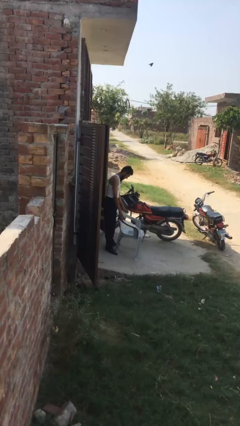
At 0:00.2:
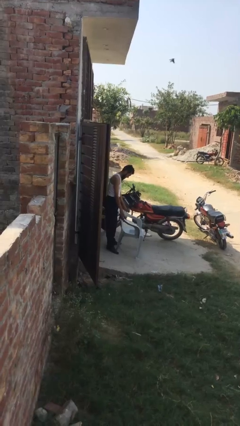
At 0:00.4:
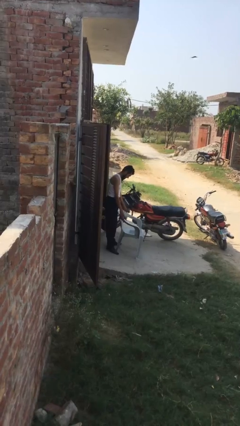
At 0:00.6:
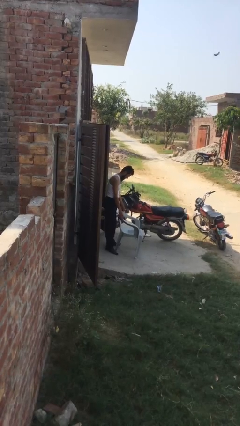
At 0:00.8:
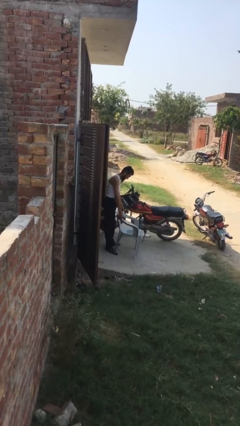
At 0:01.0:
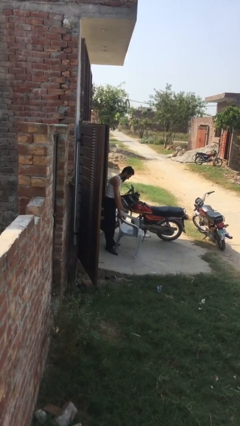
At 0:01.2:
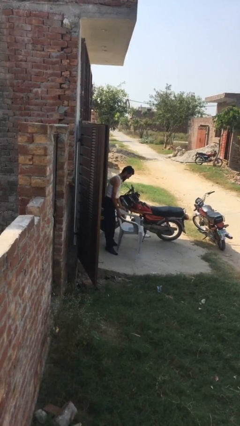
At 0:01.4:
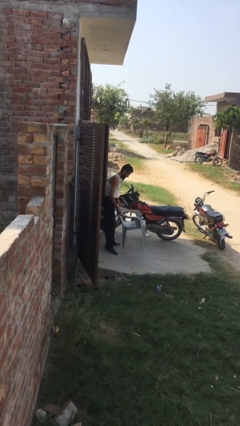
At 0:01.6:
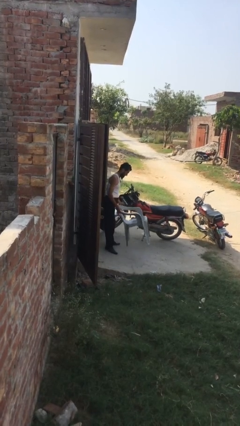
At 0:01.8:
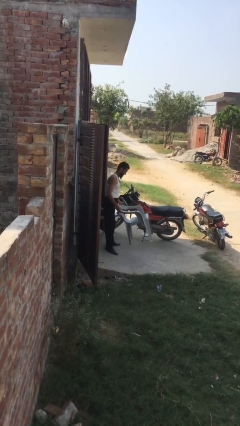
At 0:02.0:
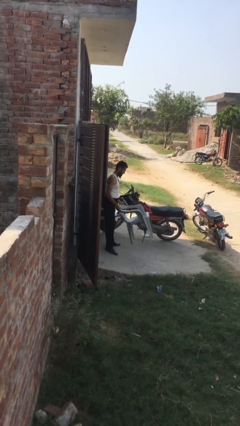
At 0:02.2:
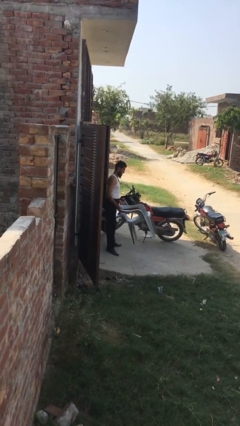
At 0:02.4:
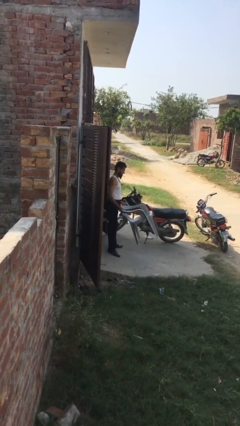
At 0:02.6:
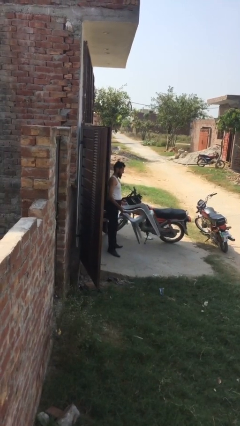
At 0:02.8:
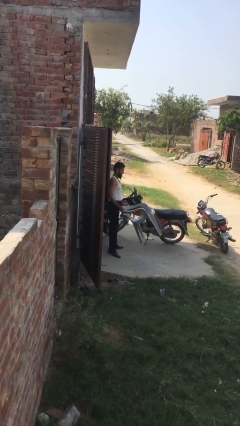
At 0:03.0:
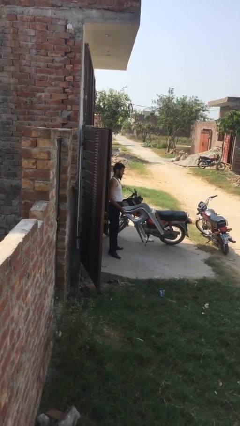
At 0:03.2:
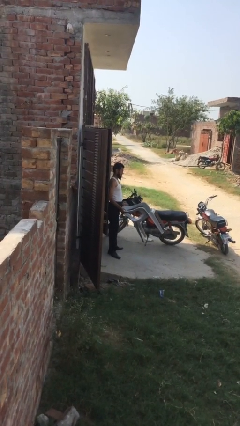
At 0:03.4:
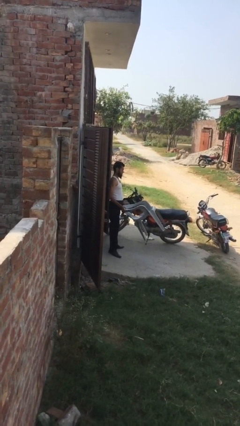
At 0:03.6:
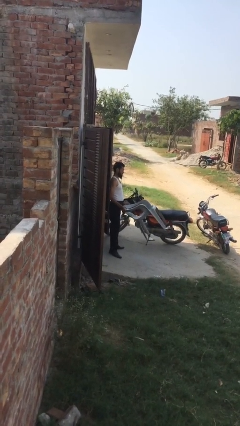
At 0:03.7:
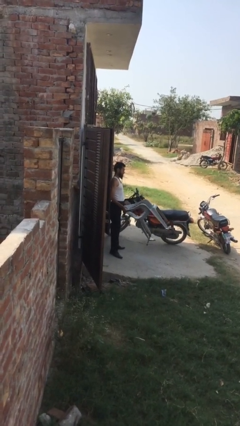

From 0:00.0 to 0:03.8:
person picks up object from floor

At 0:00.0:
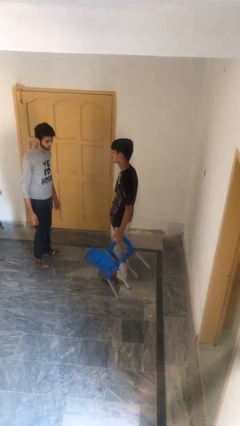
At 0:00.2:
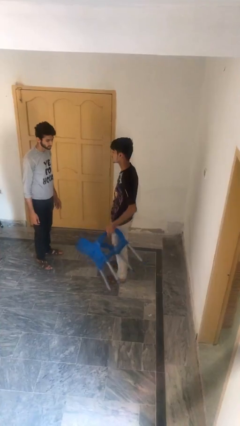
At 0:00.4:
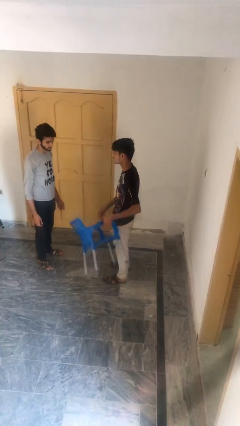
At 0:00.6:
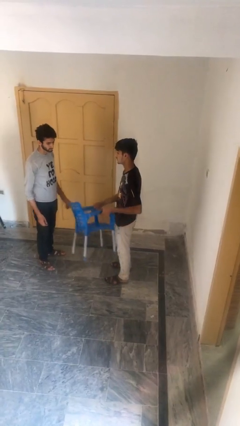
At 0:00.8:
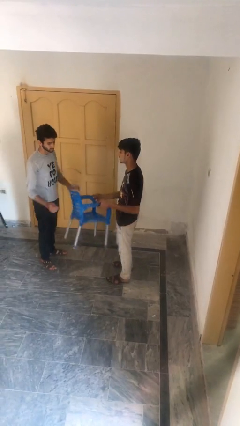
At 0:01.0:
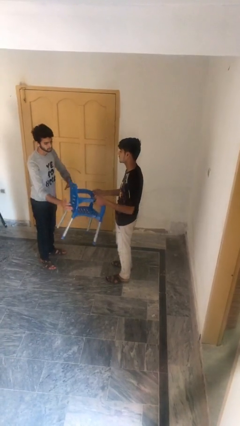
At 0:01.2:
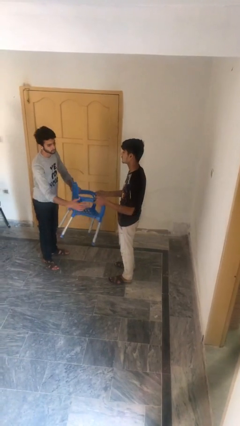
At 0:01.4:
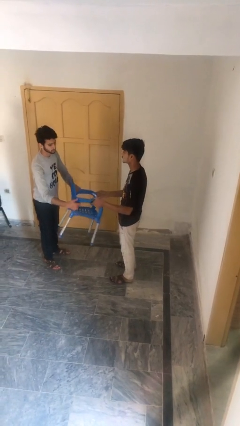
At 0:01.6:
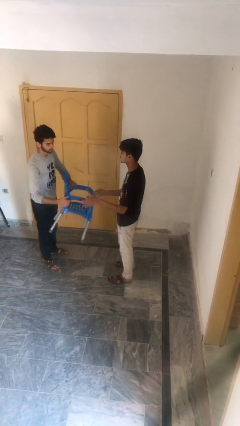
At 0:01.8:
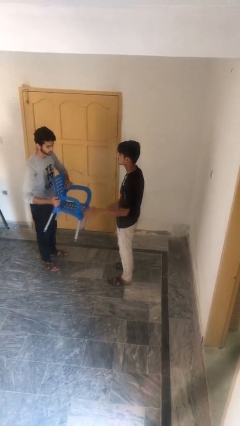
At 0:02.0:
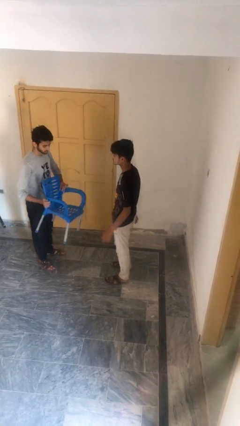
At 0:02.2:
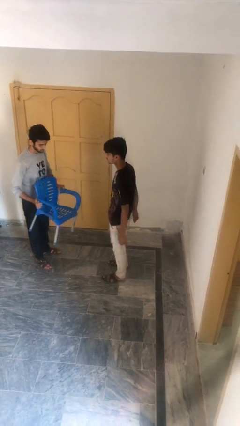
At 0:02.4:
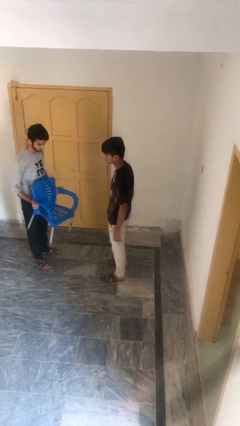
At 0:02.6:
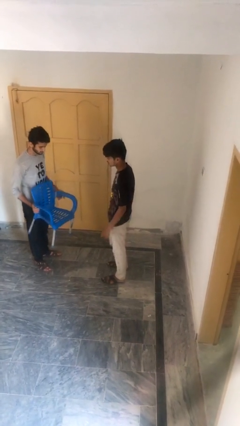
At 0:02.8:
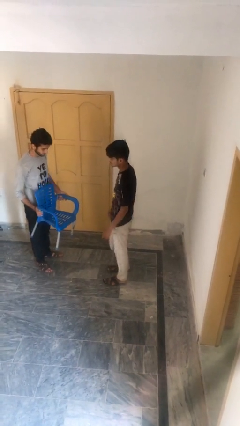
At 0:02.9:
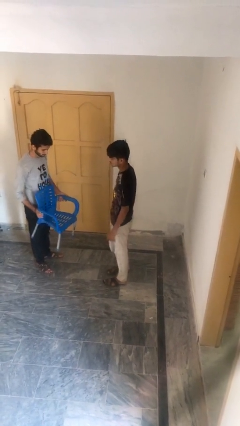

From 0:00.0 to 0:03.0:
person transfers object to person

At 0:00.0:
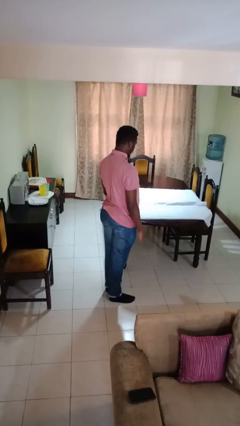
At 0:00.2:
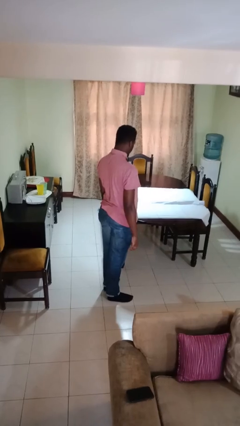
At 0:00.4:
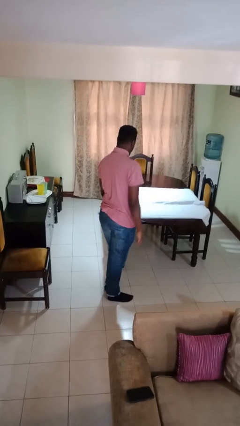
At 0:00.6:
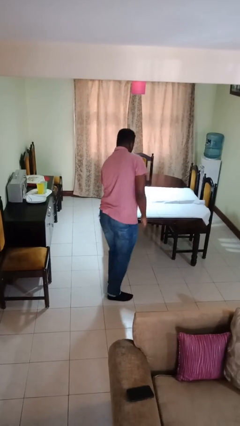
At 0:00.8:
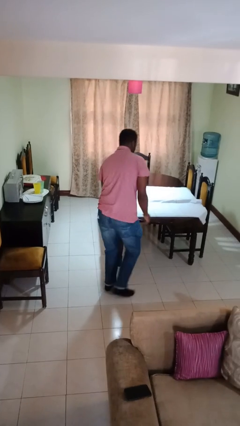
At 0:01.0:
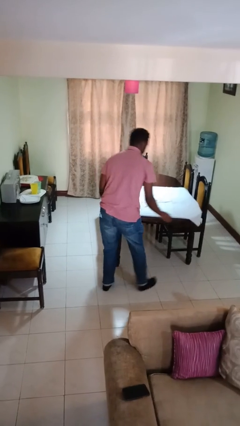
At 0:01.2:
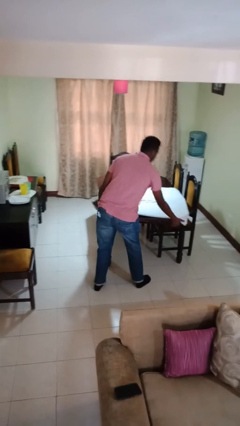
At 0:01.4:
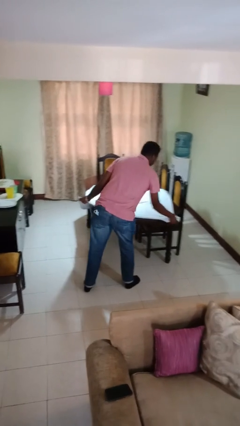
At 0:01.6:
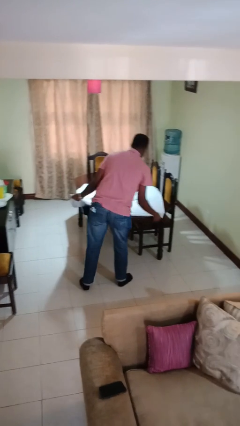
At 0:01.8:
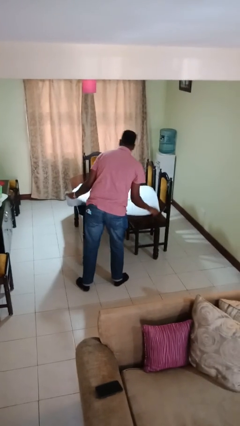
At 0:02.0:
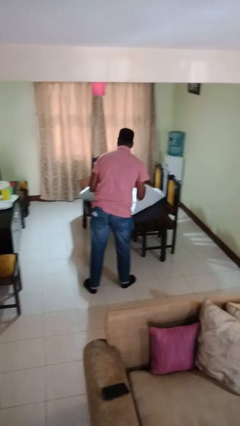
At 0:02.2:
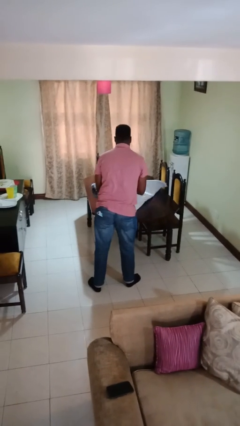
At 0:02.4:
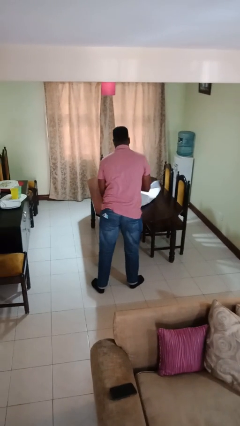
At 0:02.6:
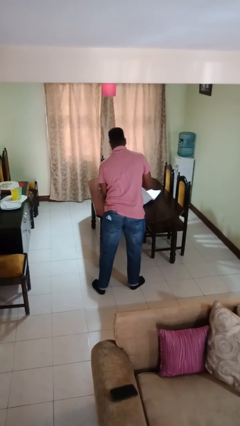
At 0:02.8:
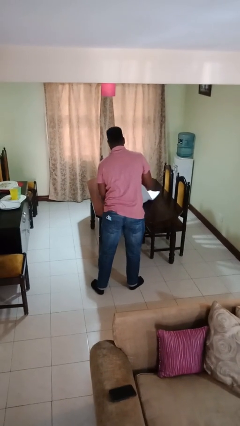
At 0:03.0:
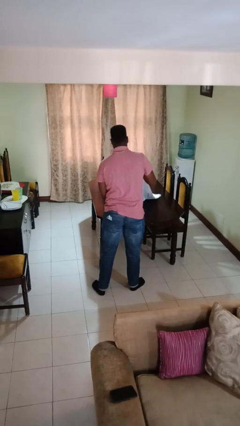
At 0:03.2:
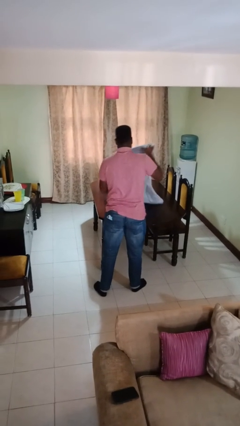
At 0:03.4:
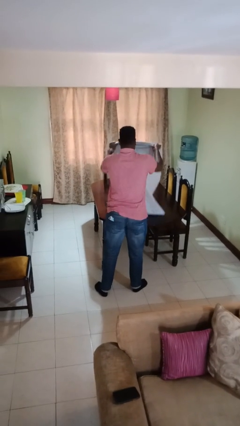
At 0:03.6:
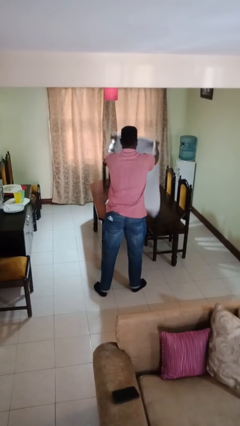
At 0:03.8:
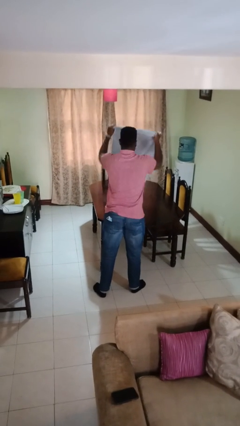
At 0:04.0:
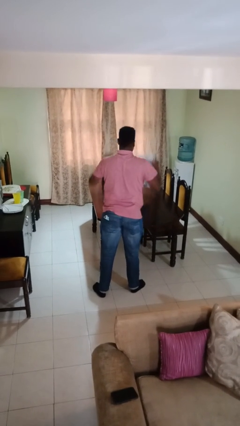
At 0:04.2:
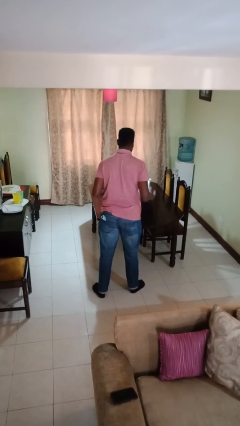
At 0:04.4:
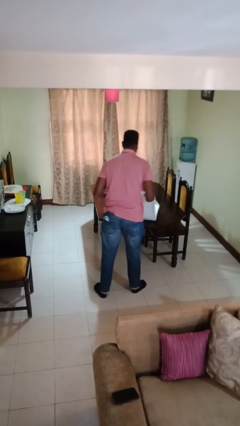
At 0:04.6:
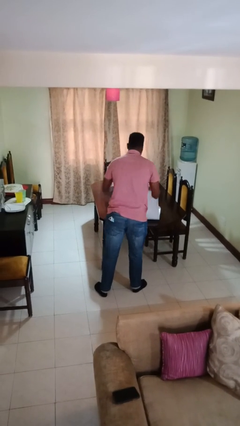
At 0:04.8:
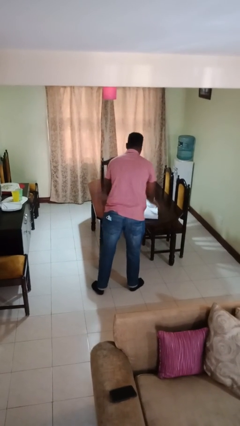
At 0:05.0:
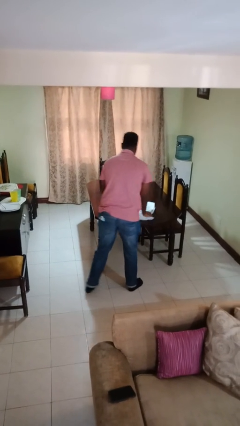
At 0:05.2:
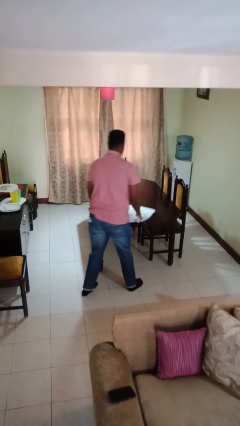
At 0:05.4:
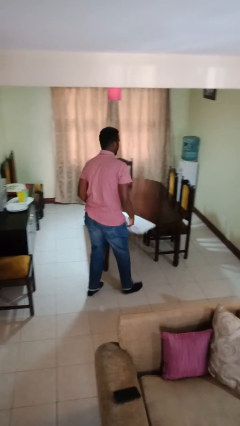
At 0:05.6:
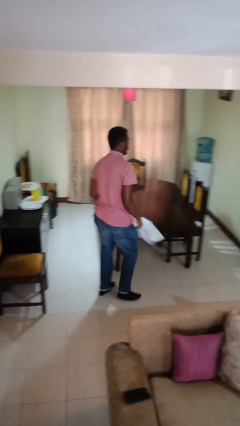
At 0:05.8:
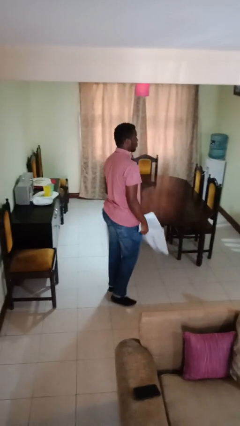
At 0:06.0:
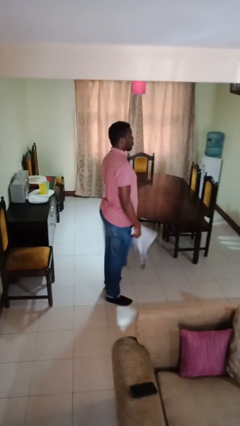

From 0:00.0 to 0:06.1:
person folds tablecloth

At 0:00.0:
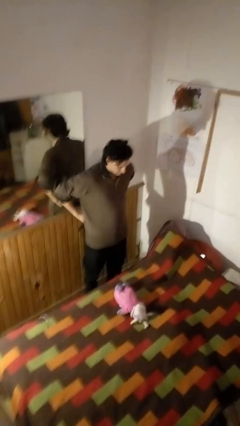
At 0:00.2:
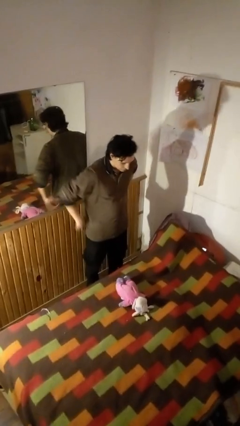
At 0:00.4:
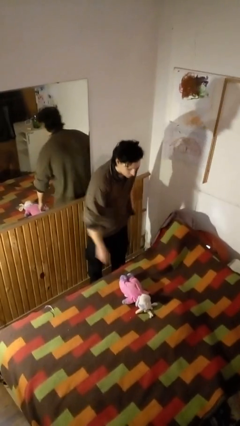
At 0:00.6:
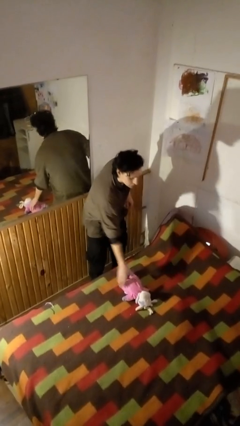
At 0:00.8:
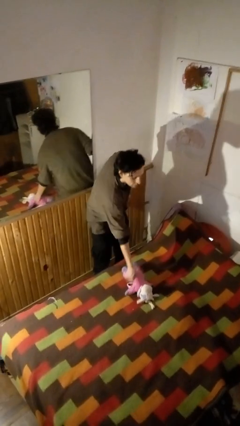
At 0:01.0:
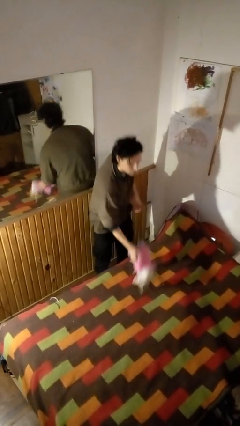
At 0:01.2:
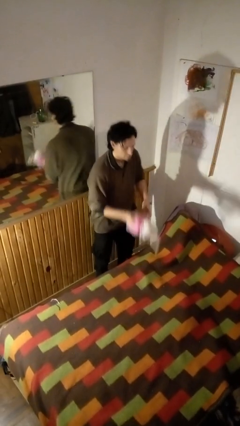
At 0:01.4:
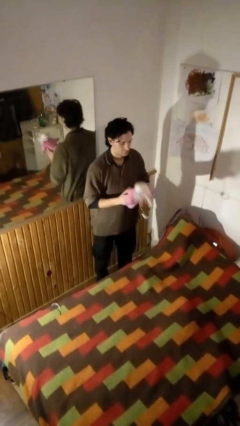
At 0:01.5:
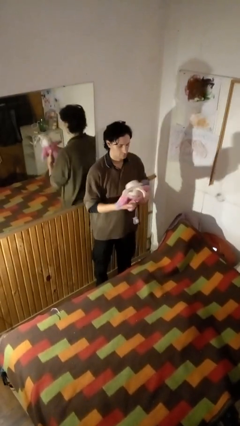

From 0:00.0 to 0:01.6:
person picks up object from bed

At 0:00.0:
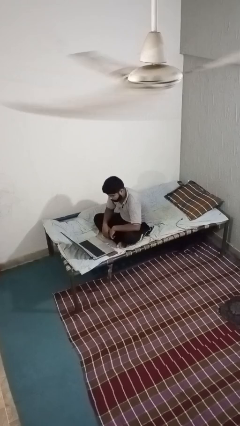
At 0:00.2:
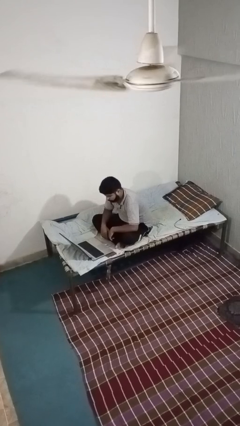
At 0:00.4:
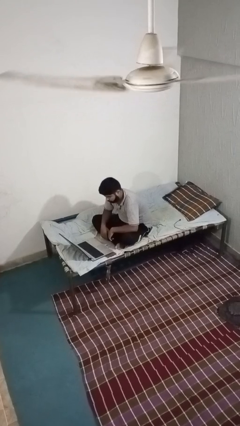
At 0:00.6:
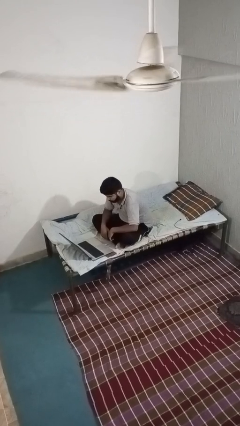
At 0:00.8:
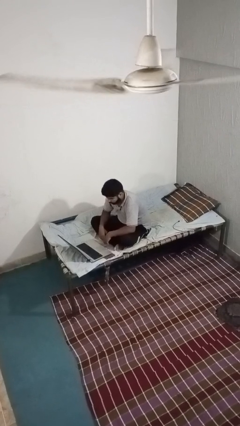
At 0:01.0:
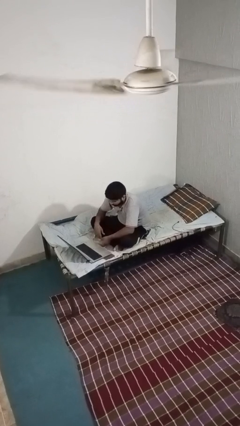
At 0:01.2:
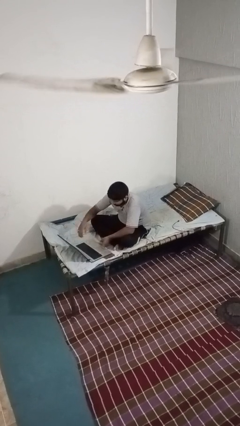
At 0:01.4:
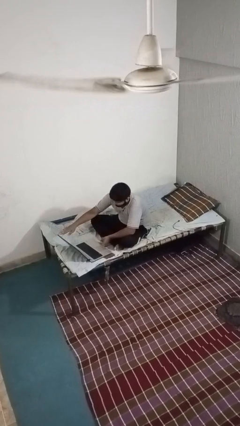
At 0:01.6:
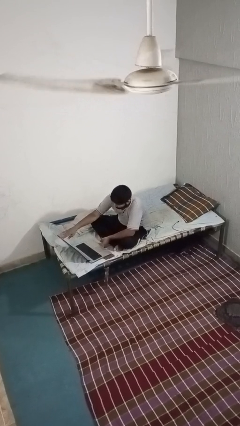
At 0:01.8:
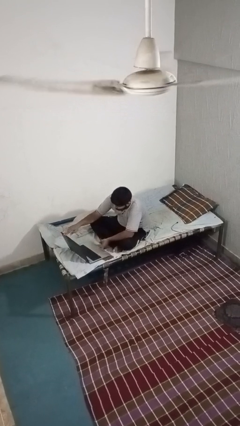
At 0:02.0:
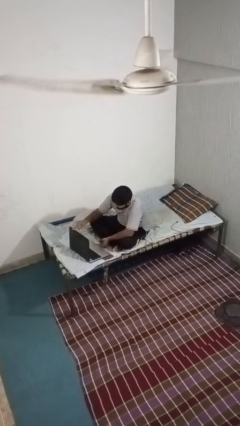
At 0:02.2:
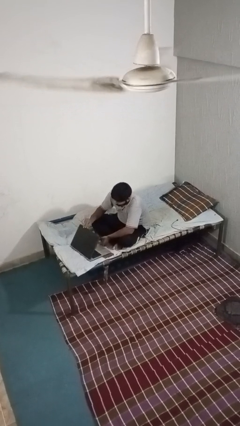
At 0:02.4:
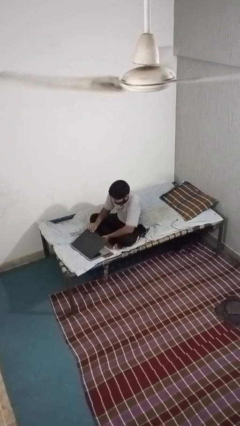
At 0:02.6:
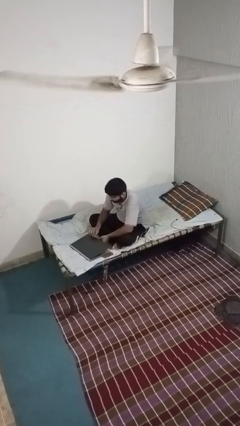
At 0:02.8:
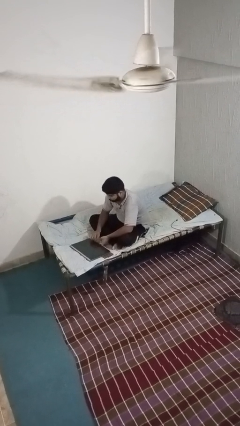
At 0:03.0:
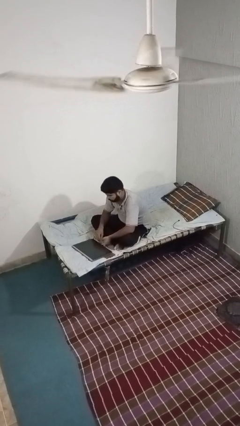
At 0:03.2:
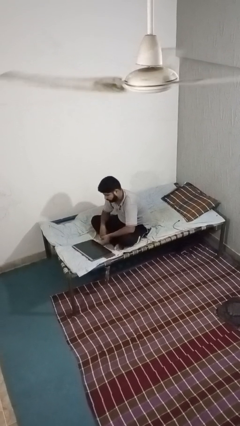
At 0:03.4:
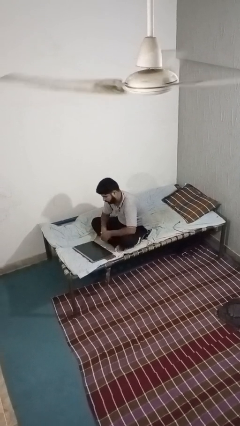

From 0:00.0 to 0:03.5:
person closes laptop
